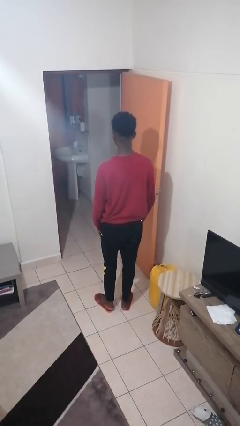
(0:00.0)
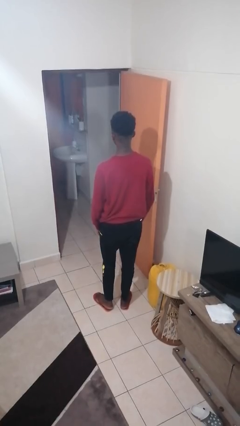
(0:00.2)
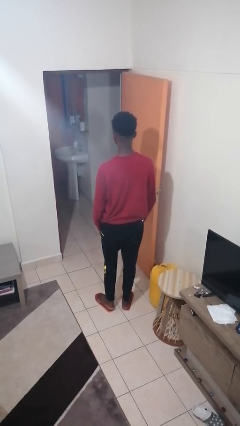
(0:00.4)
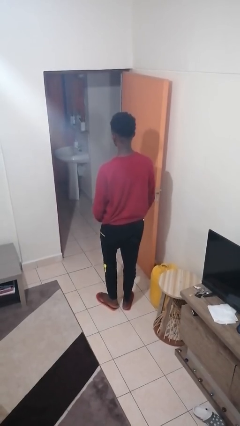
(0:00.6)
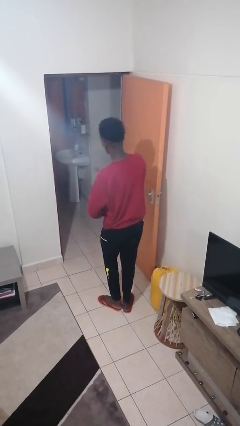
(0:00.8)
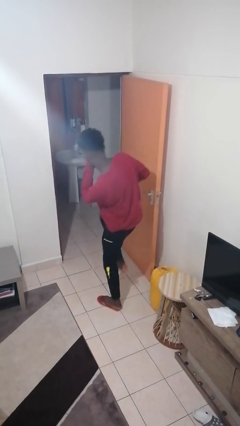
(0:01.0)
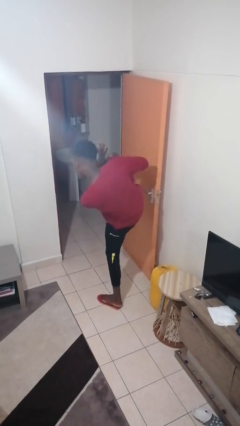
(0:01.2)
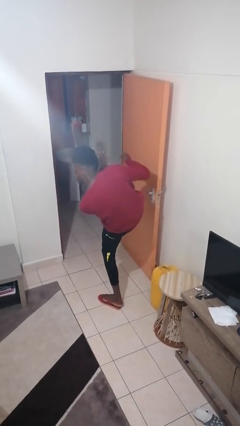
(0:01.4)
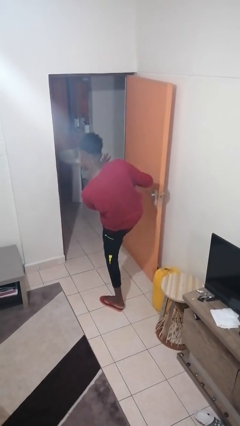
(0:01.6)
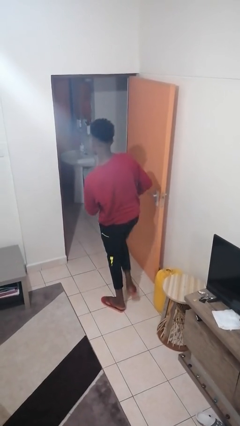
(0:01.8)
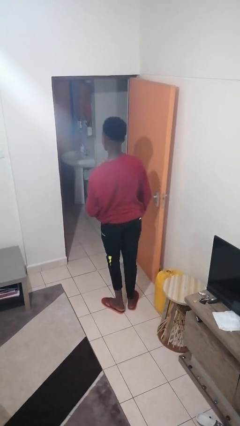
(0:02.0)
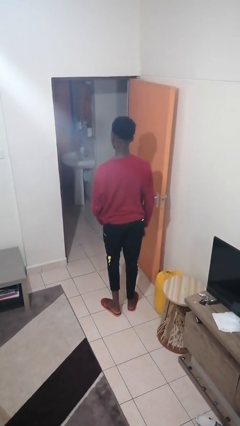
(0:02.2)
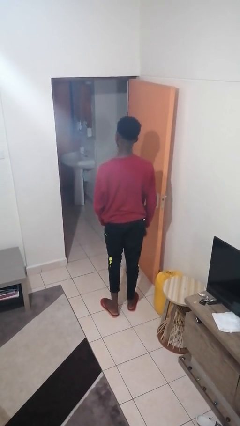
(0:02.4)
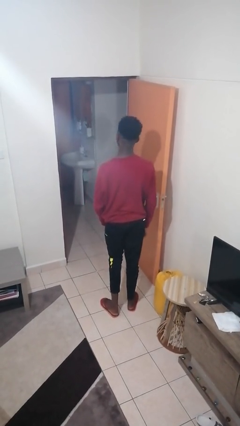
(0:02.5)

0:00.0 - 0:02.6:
person karate kicks

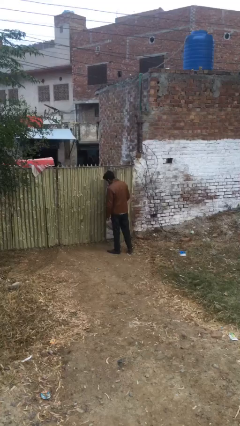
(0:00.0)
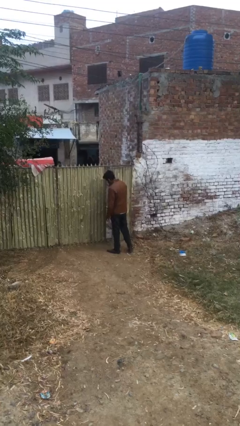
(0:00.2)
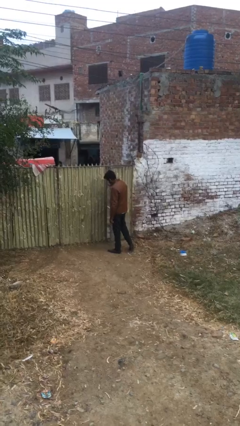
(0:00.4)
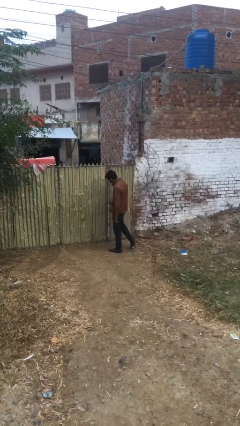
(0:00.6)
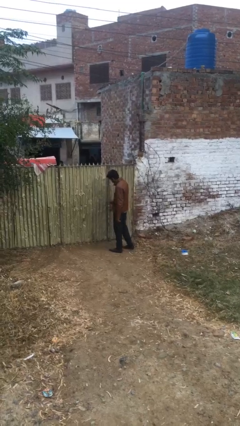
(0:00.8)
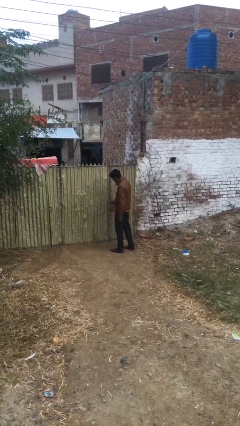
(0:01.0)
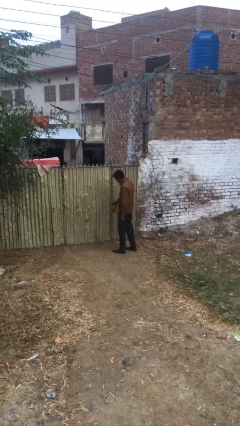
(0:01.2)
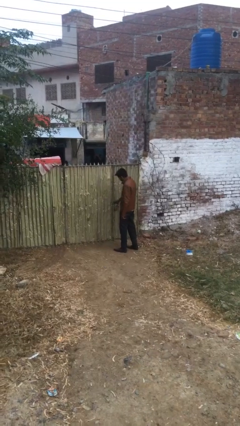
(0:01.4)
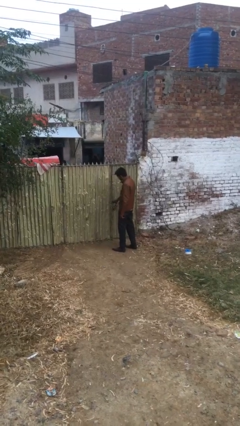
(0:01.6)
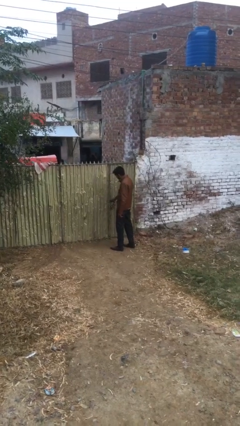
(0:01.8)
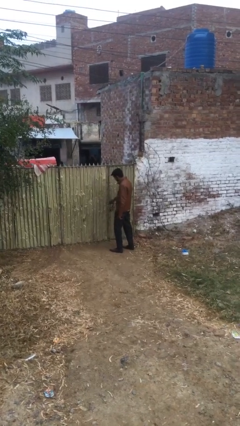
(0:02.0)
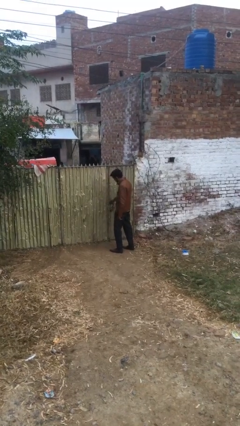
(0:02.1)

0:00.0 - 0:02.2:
person closes facility door

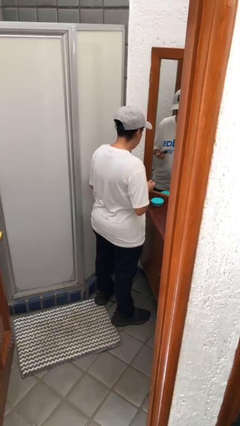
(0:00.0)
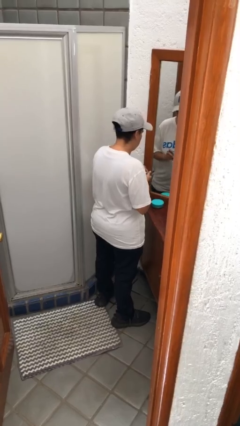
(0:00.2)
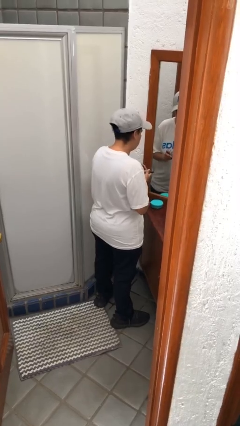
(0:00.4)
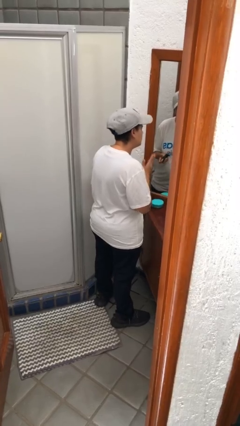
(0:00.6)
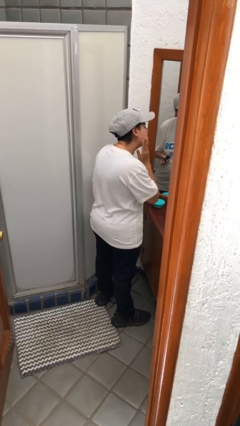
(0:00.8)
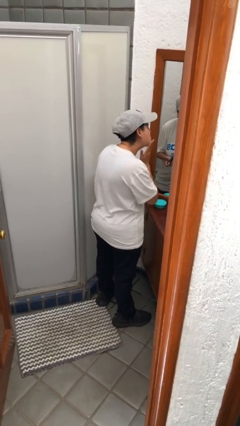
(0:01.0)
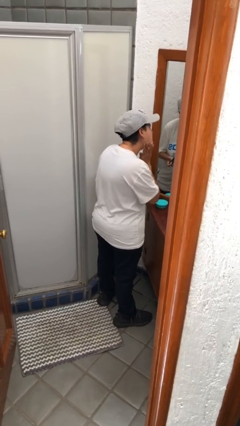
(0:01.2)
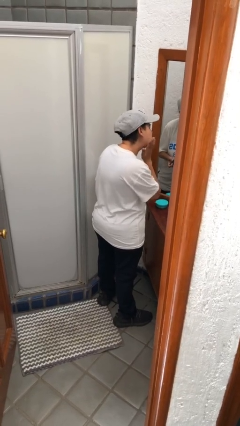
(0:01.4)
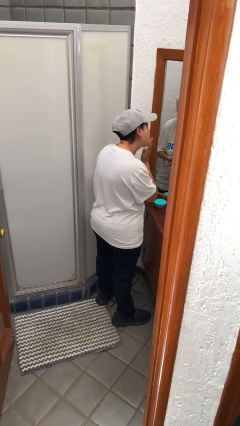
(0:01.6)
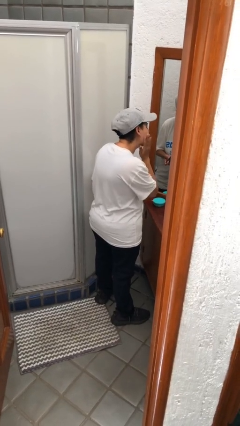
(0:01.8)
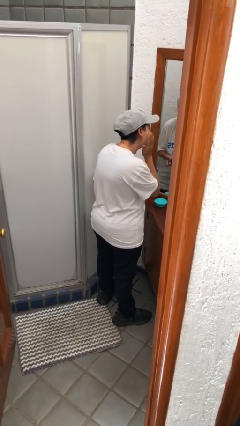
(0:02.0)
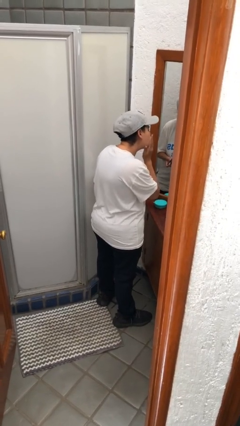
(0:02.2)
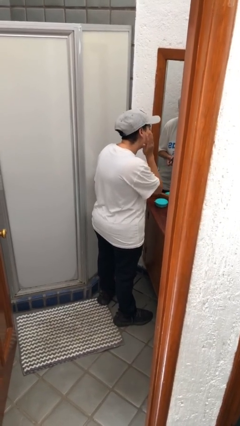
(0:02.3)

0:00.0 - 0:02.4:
person applies facial moisturizer

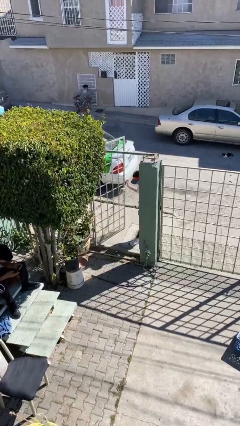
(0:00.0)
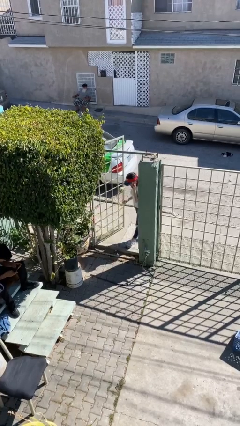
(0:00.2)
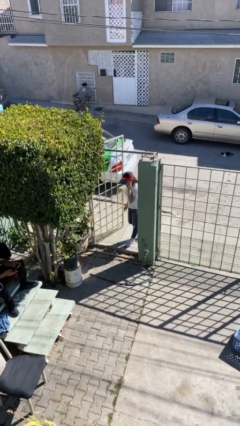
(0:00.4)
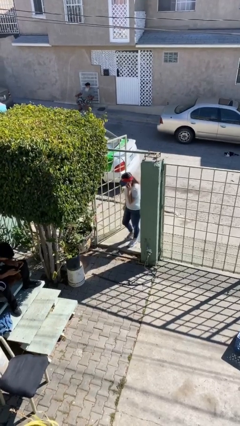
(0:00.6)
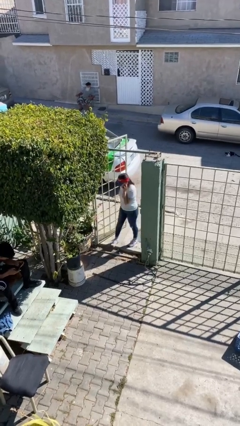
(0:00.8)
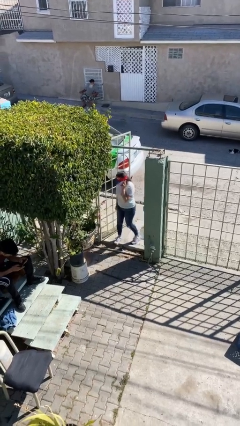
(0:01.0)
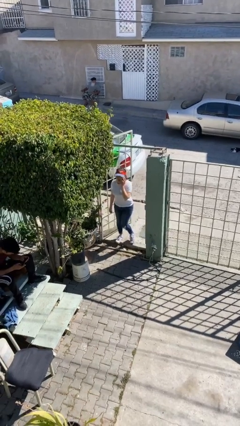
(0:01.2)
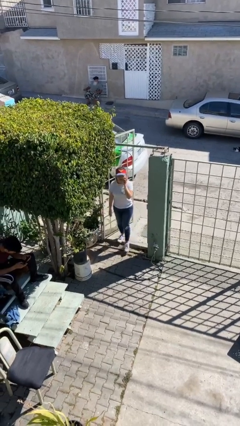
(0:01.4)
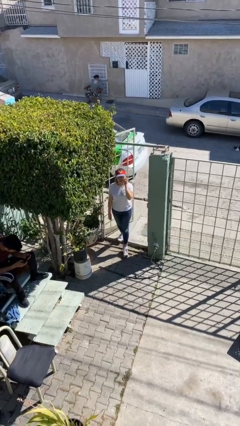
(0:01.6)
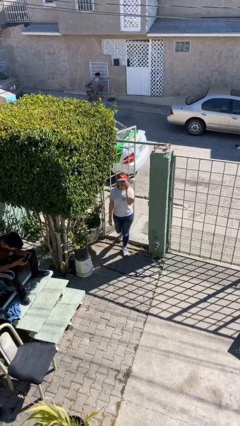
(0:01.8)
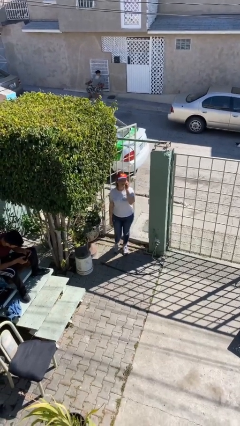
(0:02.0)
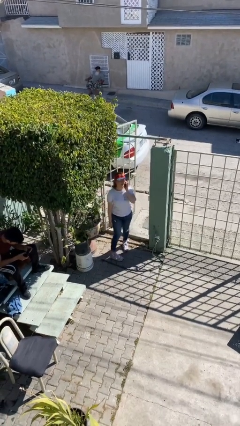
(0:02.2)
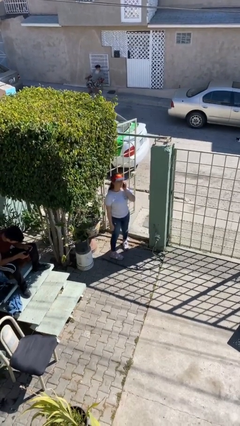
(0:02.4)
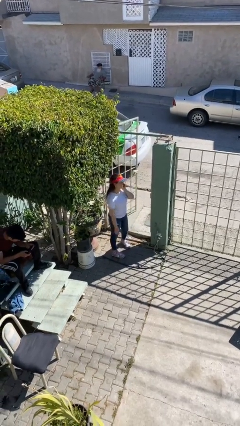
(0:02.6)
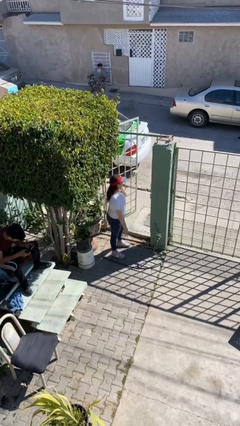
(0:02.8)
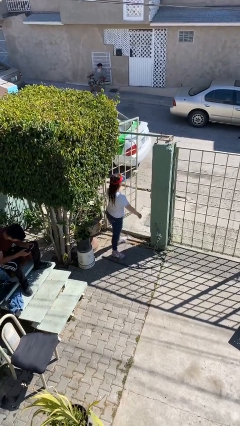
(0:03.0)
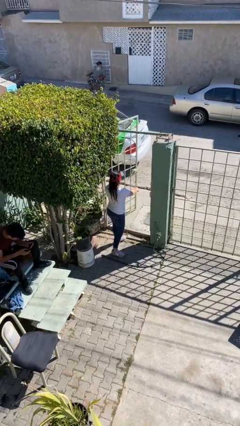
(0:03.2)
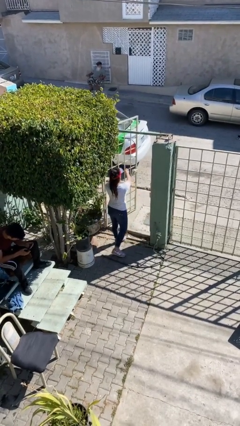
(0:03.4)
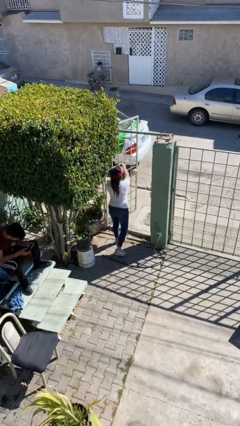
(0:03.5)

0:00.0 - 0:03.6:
person enters scene through structure

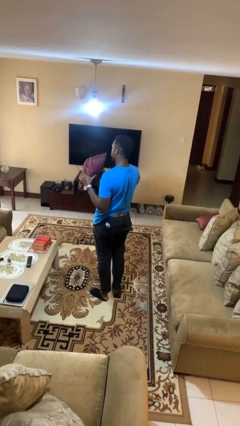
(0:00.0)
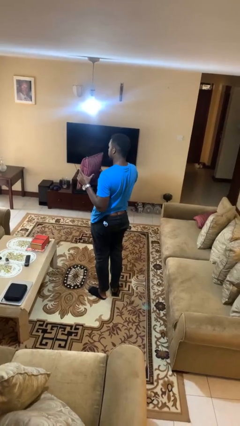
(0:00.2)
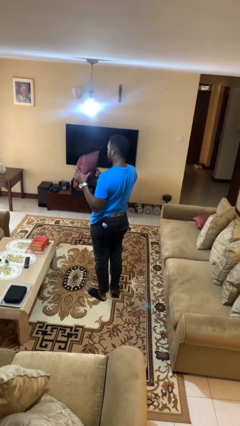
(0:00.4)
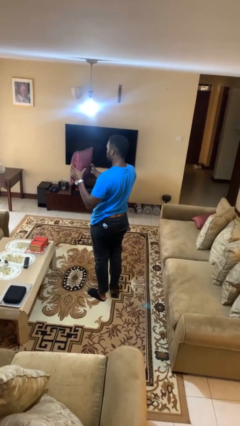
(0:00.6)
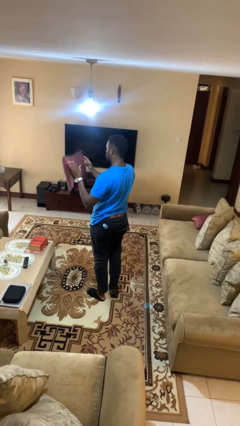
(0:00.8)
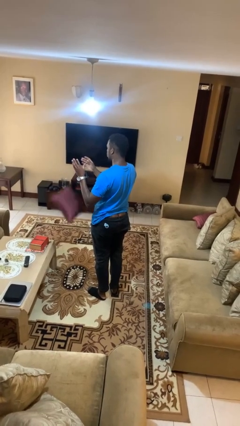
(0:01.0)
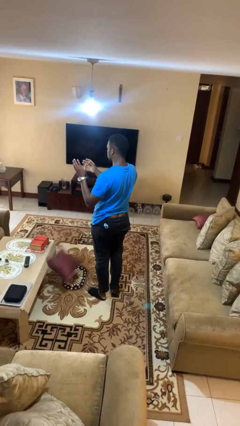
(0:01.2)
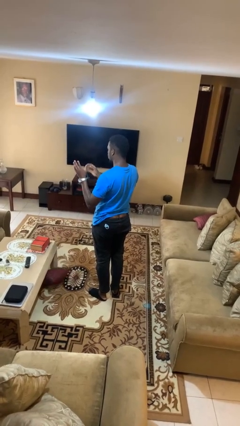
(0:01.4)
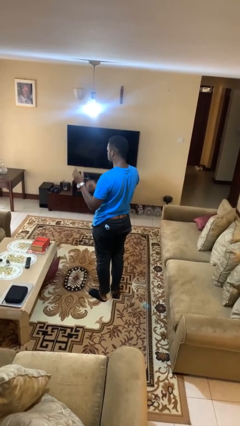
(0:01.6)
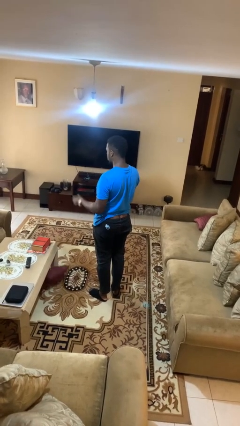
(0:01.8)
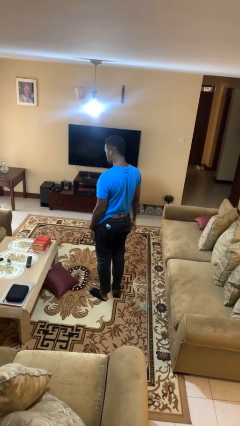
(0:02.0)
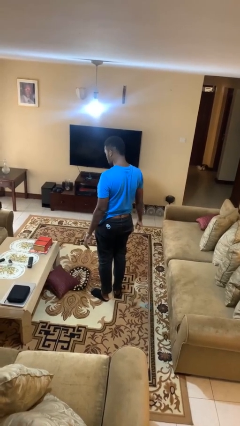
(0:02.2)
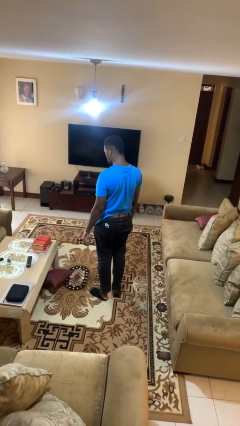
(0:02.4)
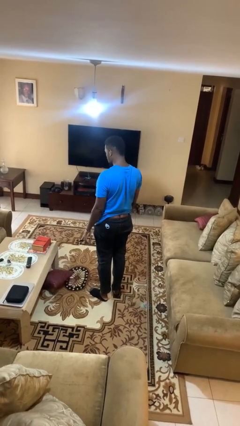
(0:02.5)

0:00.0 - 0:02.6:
person drops object

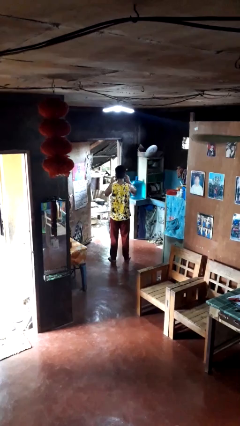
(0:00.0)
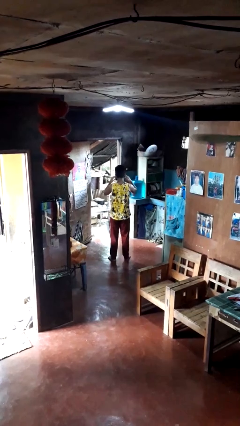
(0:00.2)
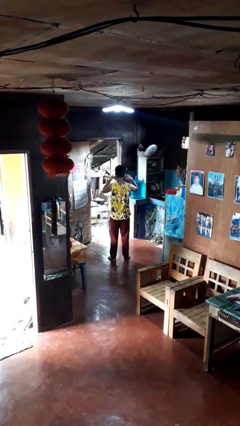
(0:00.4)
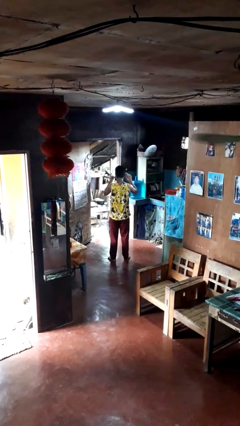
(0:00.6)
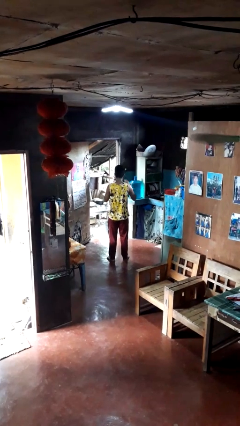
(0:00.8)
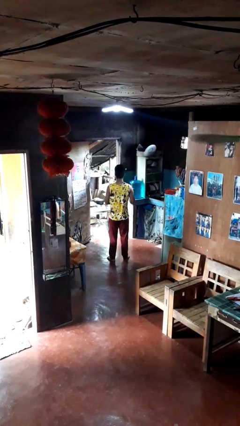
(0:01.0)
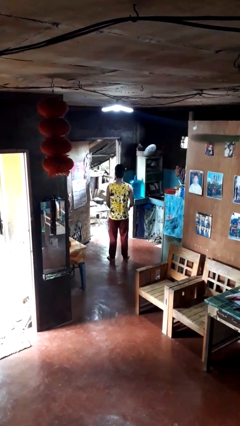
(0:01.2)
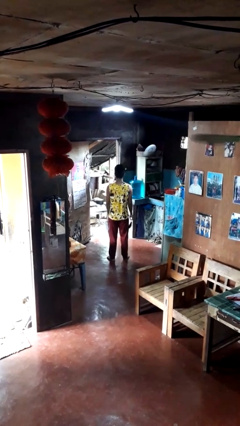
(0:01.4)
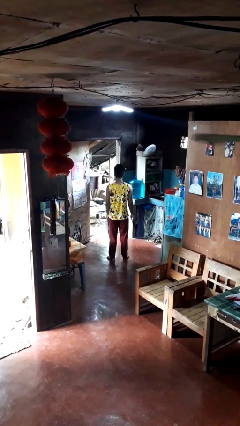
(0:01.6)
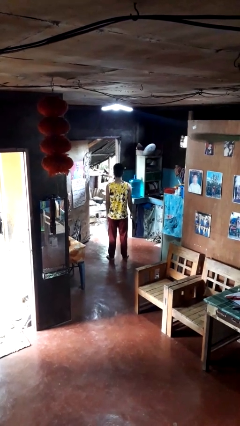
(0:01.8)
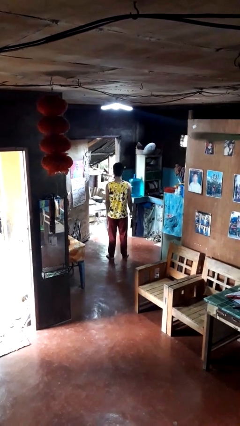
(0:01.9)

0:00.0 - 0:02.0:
person takes off facemask

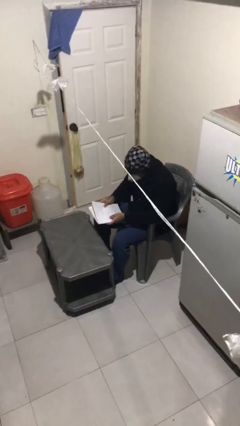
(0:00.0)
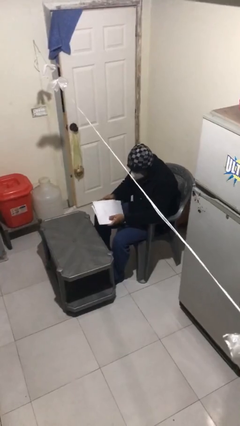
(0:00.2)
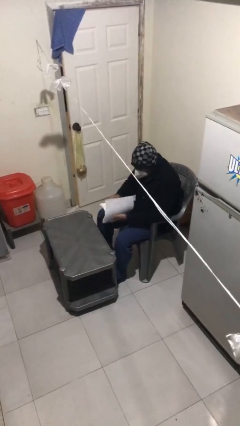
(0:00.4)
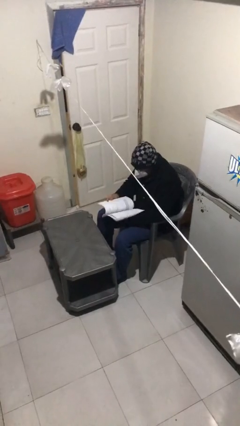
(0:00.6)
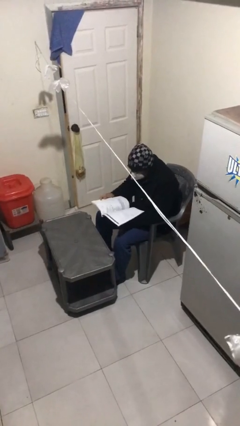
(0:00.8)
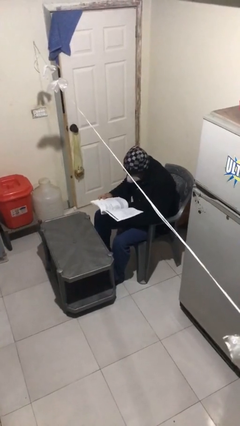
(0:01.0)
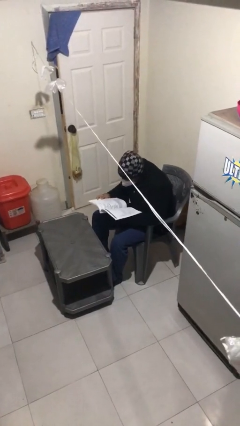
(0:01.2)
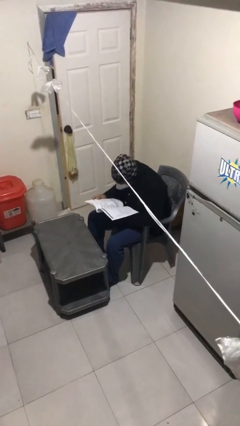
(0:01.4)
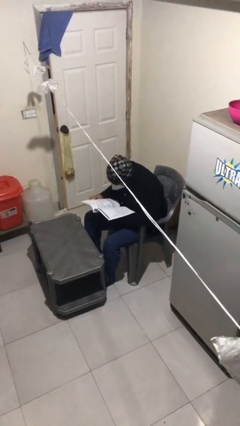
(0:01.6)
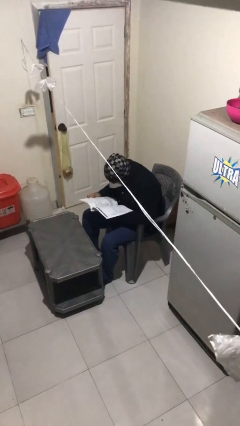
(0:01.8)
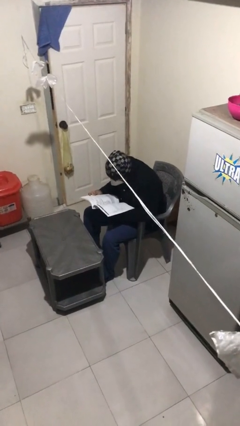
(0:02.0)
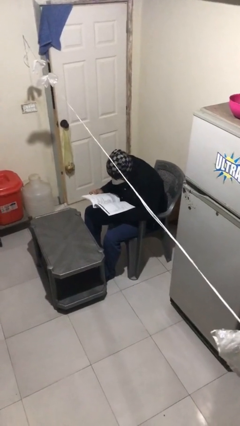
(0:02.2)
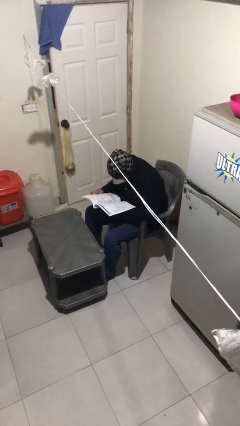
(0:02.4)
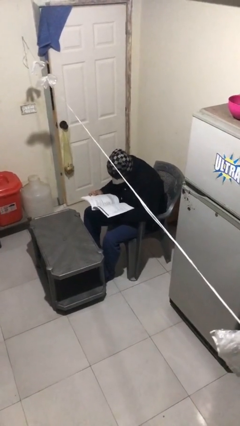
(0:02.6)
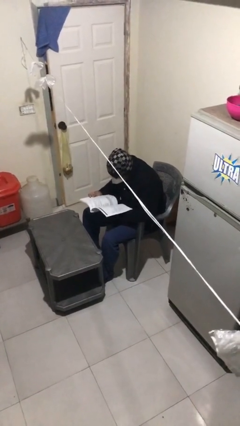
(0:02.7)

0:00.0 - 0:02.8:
person reads document
